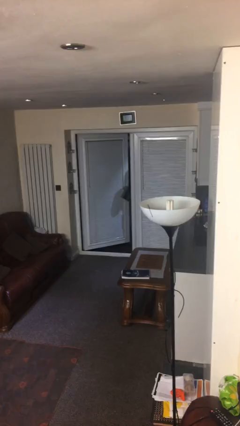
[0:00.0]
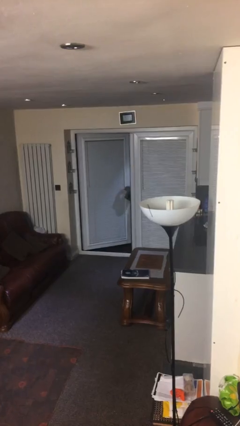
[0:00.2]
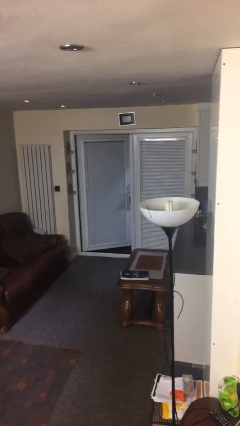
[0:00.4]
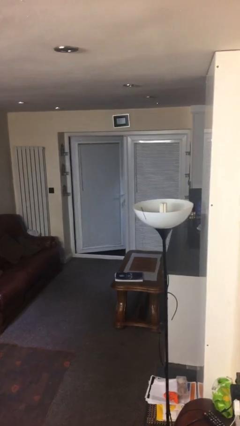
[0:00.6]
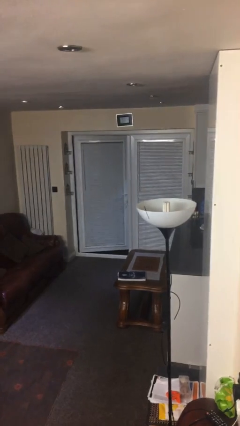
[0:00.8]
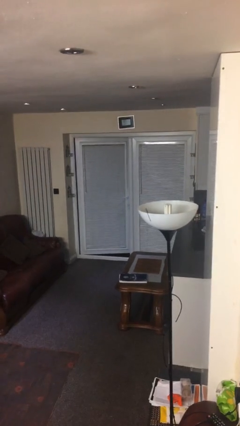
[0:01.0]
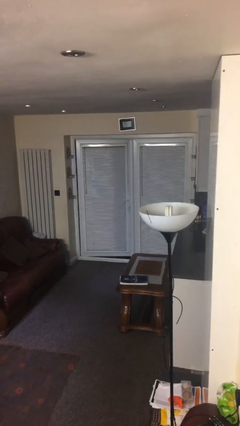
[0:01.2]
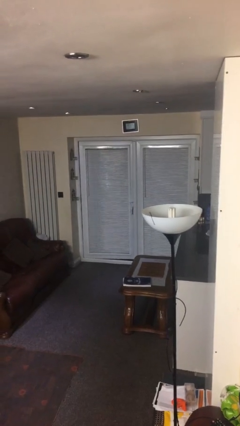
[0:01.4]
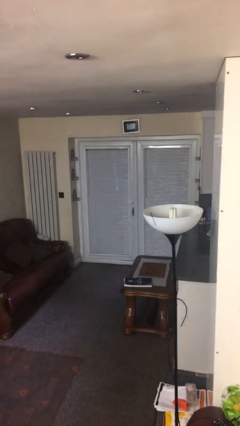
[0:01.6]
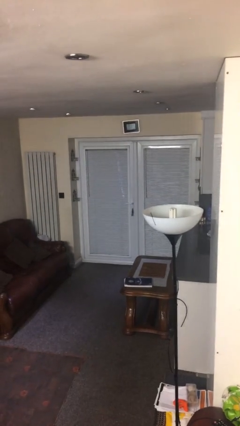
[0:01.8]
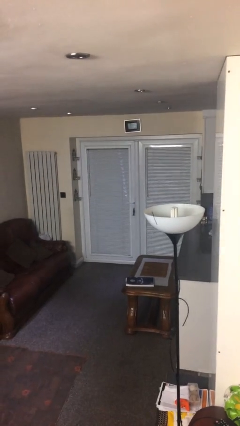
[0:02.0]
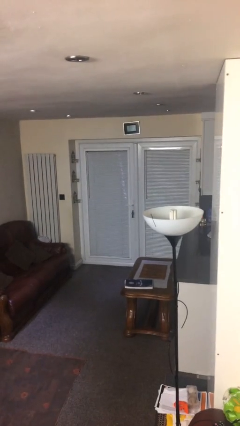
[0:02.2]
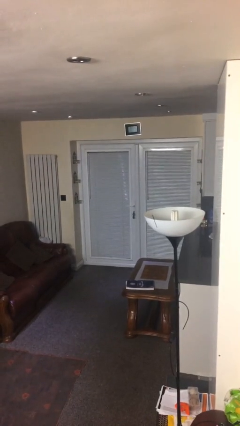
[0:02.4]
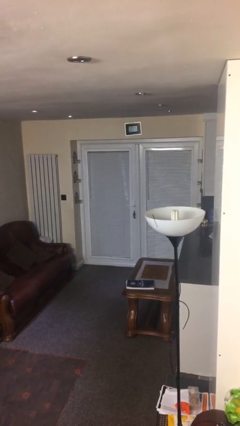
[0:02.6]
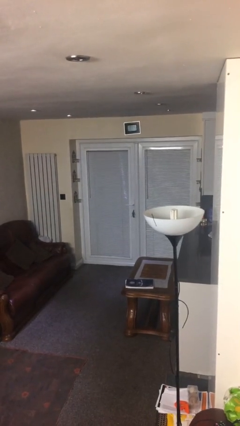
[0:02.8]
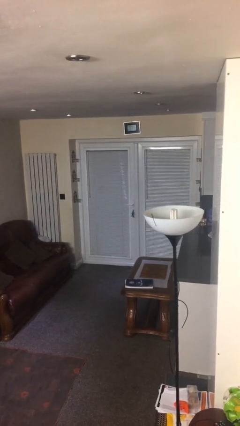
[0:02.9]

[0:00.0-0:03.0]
person closes facility door

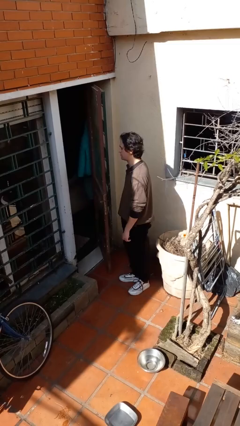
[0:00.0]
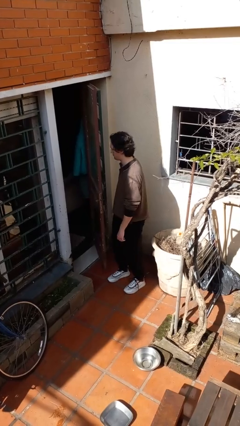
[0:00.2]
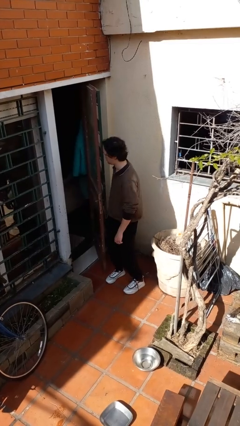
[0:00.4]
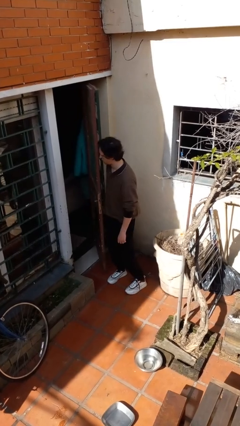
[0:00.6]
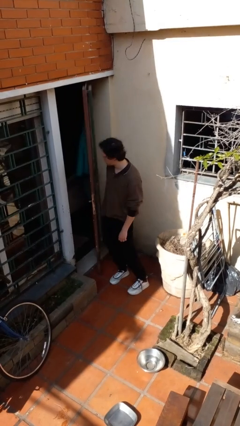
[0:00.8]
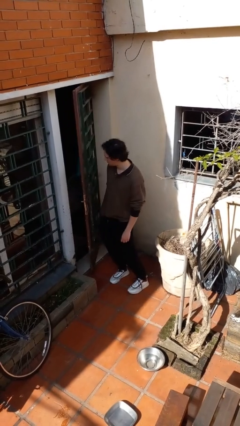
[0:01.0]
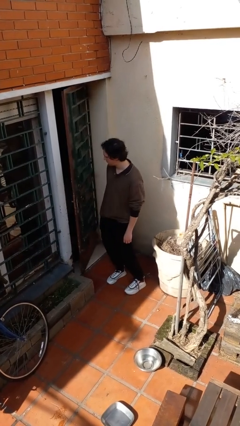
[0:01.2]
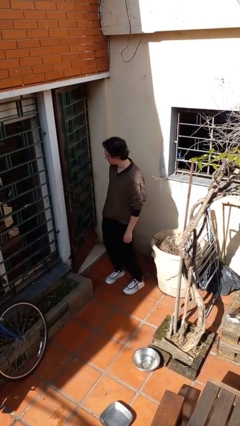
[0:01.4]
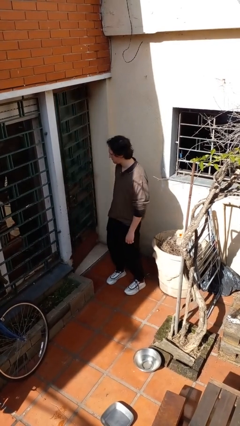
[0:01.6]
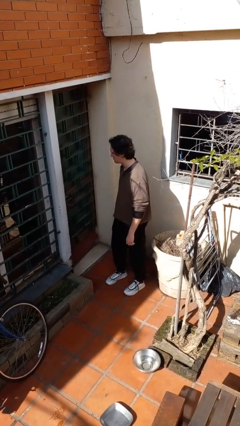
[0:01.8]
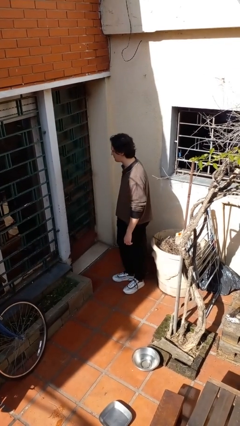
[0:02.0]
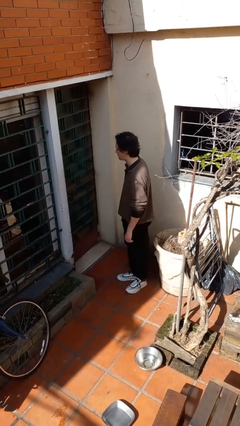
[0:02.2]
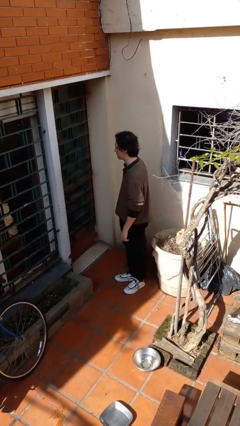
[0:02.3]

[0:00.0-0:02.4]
person closes door with hip

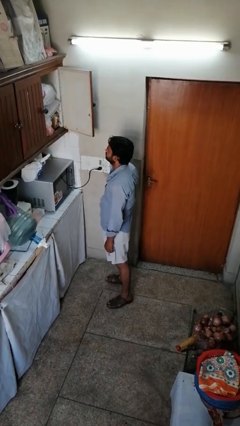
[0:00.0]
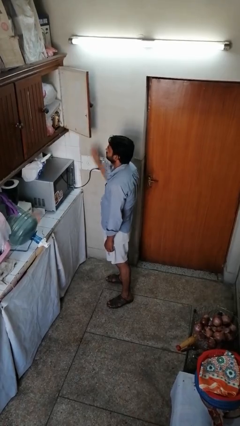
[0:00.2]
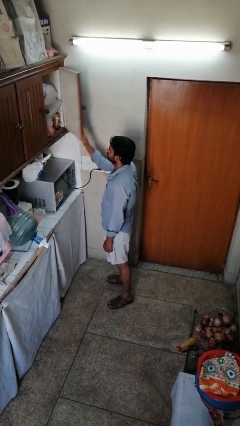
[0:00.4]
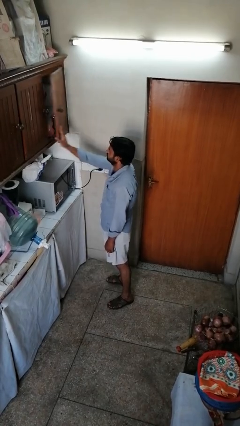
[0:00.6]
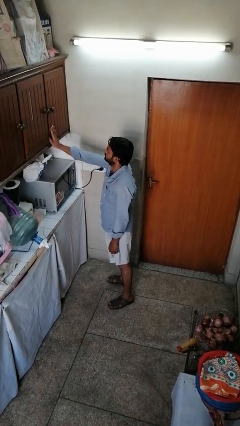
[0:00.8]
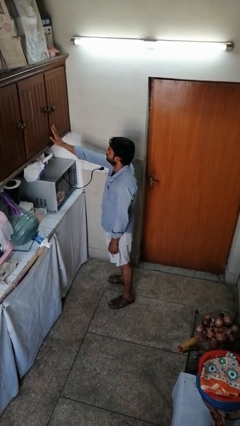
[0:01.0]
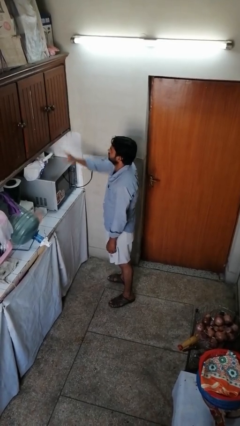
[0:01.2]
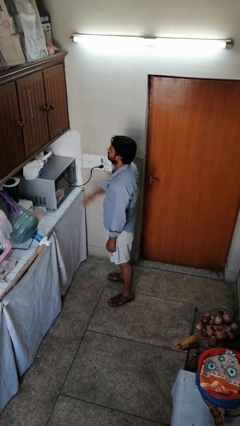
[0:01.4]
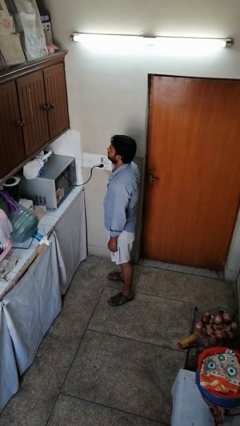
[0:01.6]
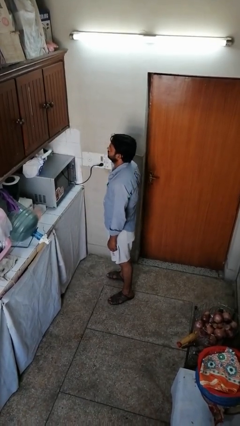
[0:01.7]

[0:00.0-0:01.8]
person closes cabinet

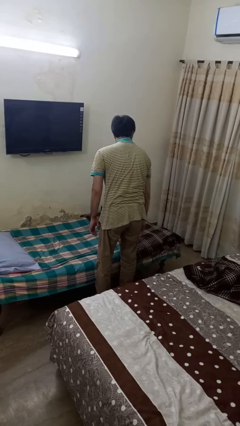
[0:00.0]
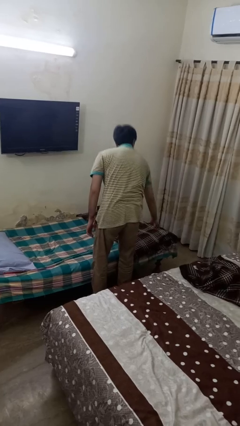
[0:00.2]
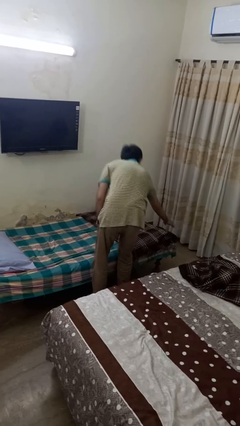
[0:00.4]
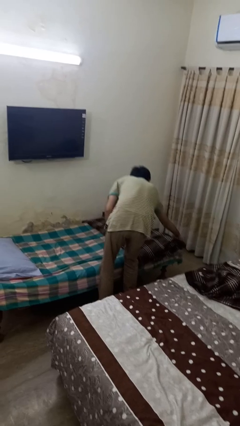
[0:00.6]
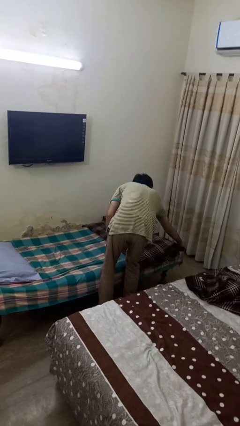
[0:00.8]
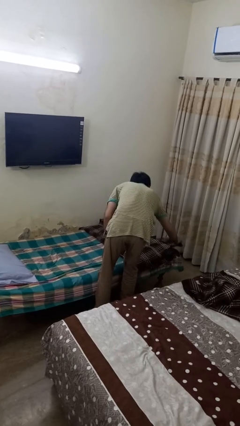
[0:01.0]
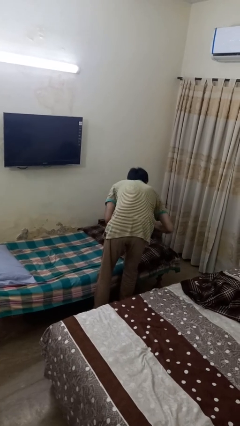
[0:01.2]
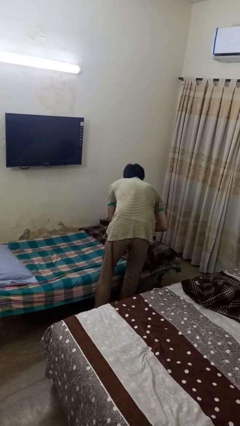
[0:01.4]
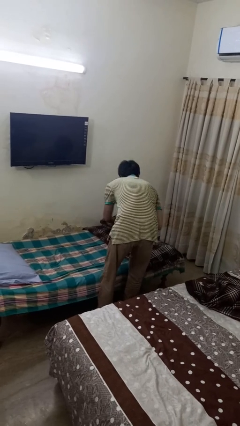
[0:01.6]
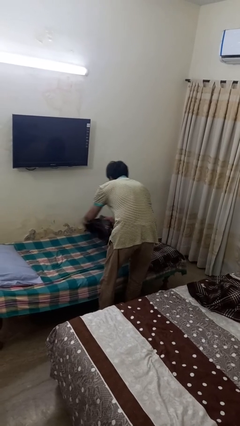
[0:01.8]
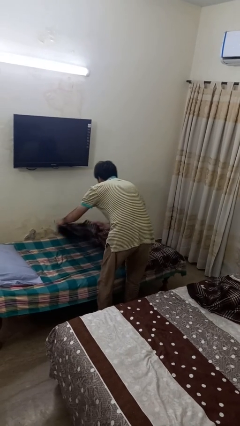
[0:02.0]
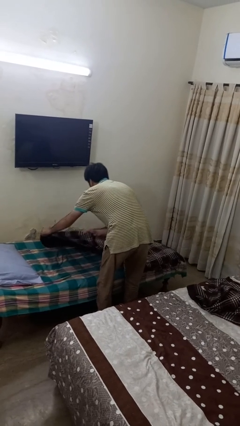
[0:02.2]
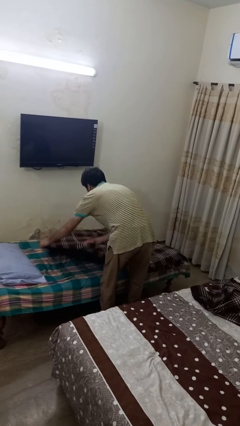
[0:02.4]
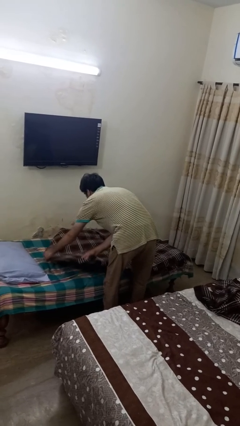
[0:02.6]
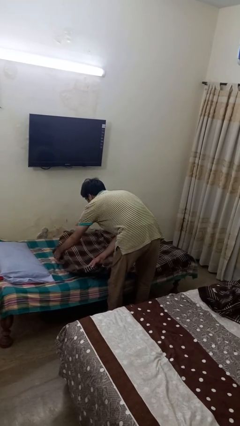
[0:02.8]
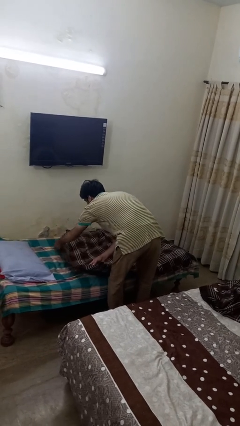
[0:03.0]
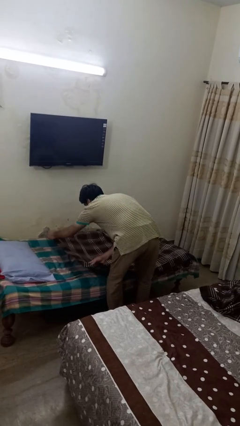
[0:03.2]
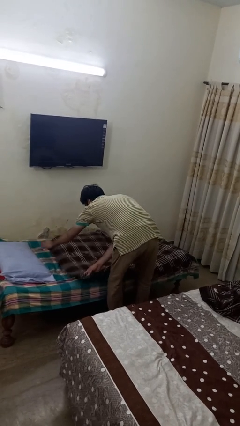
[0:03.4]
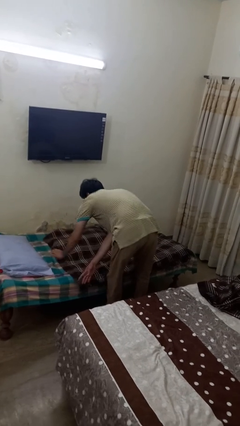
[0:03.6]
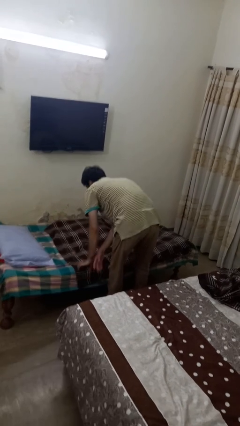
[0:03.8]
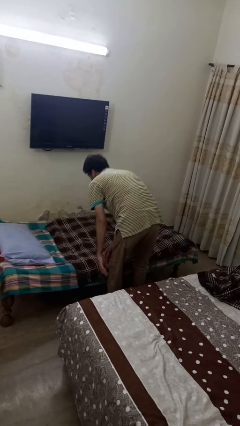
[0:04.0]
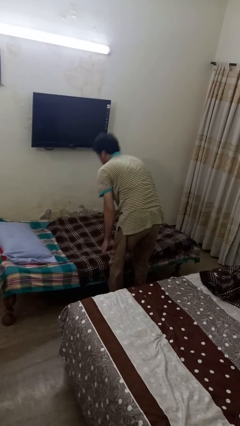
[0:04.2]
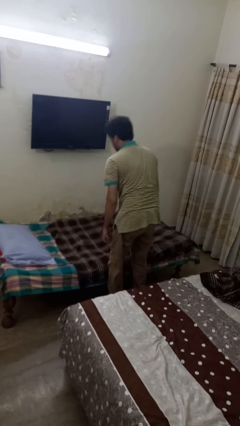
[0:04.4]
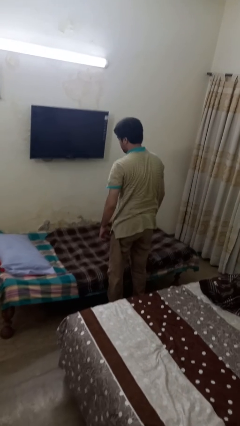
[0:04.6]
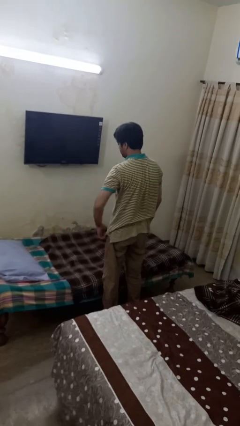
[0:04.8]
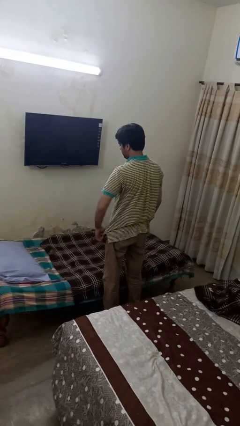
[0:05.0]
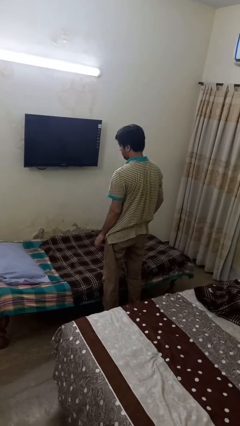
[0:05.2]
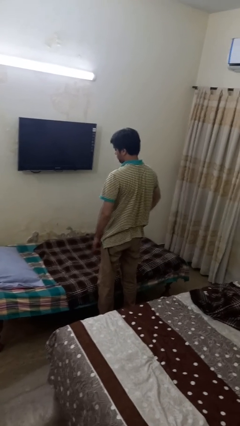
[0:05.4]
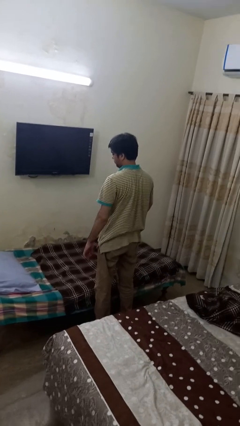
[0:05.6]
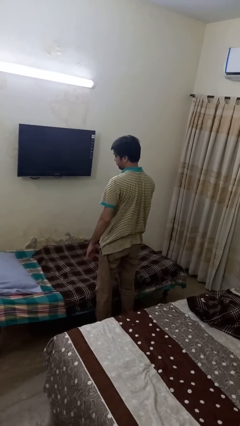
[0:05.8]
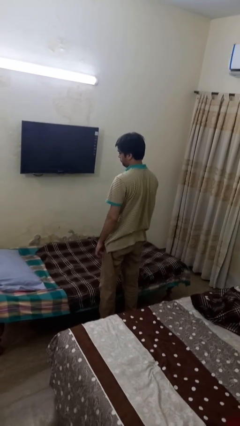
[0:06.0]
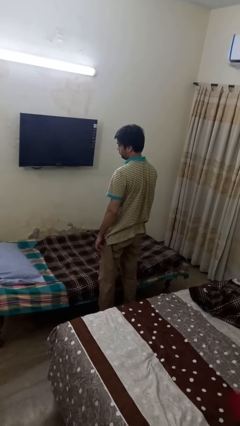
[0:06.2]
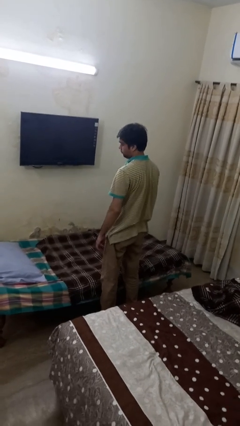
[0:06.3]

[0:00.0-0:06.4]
person unfolds blanket

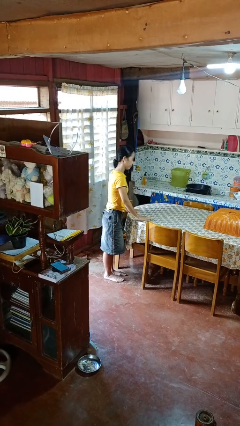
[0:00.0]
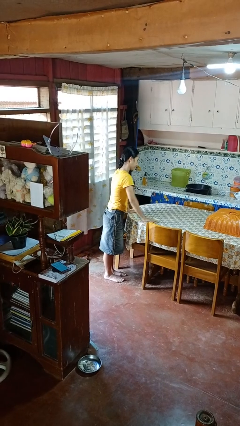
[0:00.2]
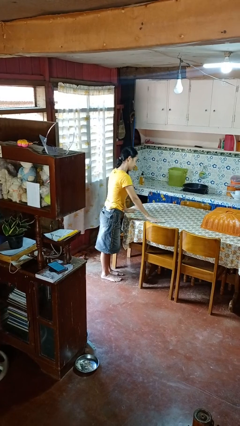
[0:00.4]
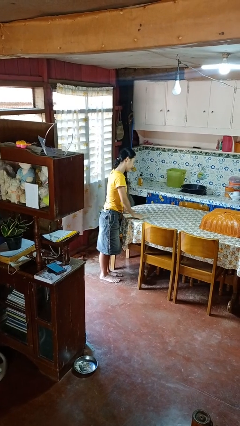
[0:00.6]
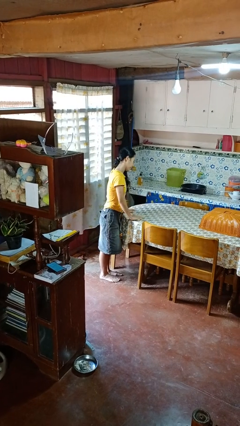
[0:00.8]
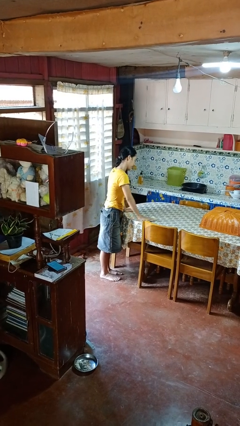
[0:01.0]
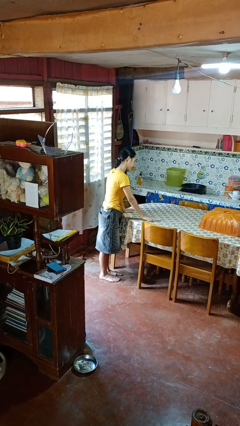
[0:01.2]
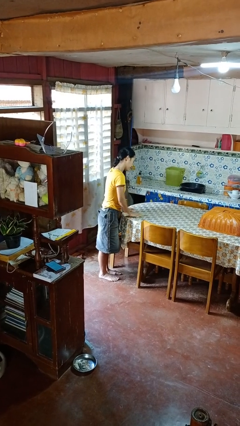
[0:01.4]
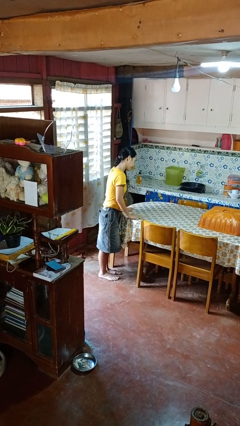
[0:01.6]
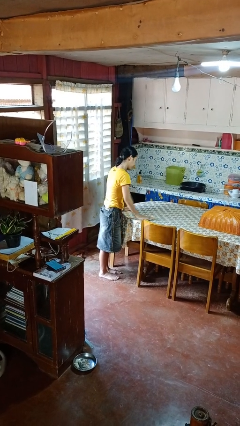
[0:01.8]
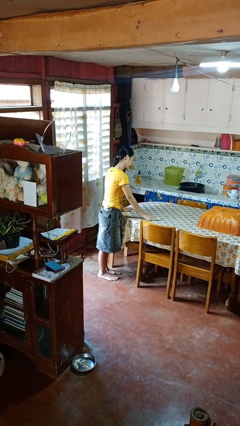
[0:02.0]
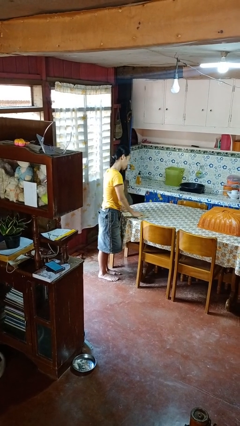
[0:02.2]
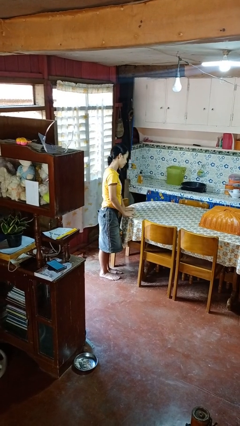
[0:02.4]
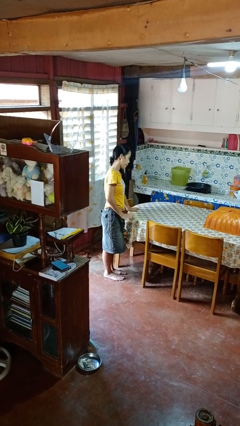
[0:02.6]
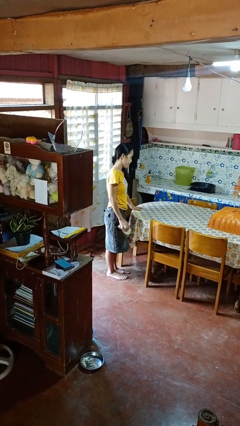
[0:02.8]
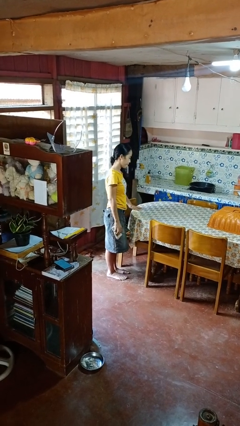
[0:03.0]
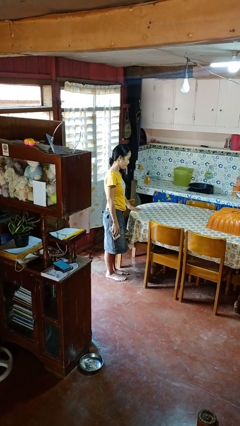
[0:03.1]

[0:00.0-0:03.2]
person cleans table with rag

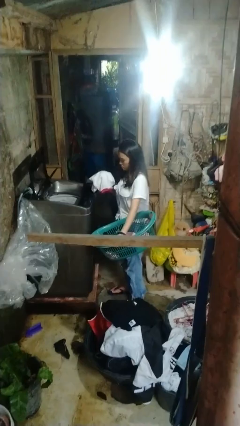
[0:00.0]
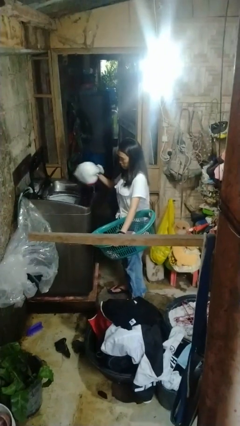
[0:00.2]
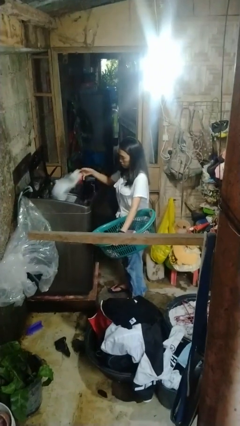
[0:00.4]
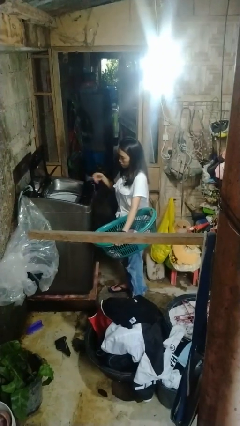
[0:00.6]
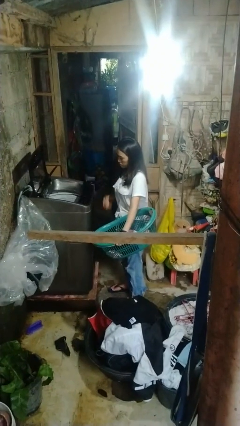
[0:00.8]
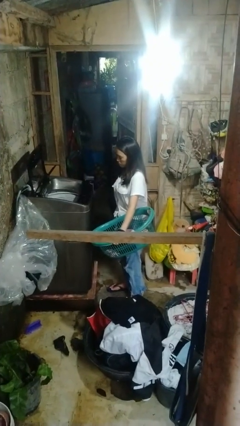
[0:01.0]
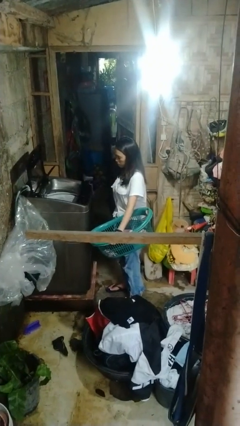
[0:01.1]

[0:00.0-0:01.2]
person loads clotheswasher
